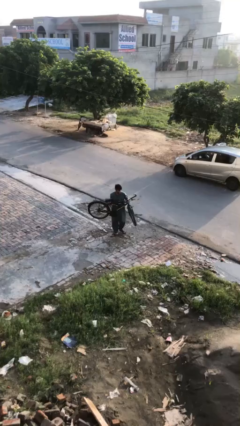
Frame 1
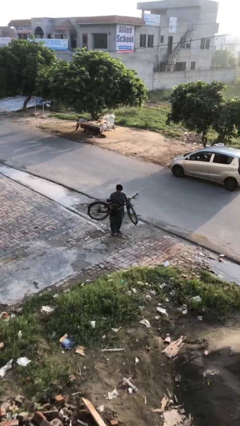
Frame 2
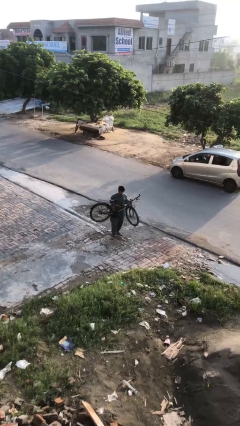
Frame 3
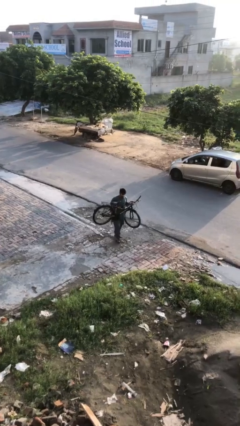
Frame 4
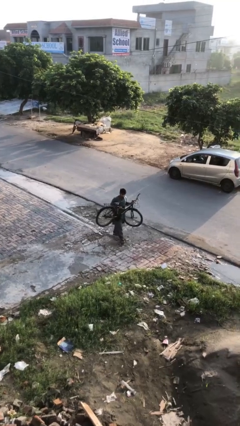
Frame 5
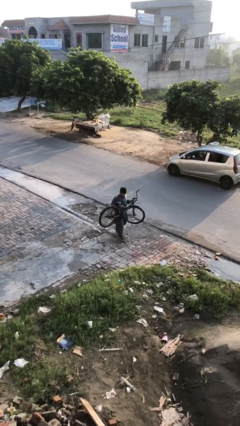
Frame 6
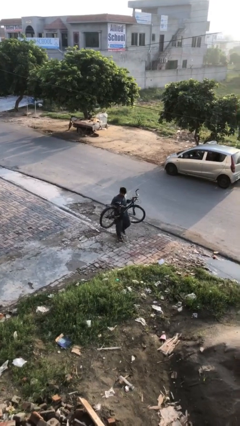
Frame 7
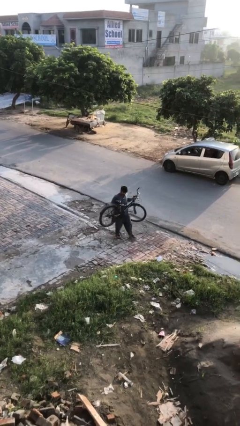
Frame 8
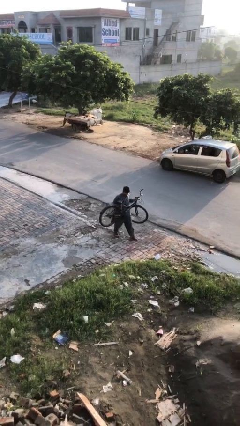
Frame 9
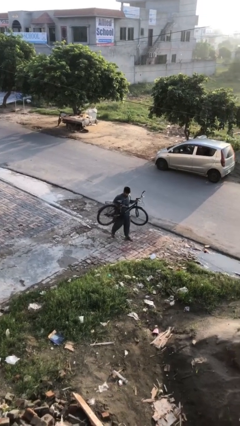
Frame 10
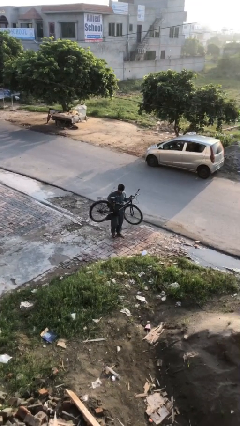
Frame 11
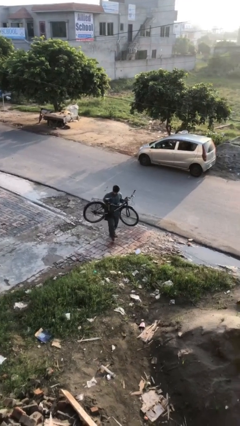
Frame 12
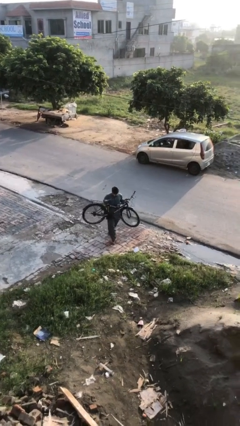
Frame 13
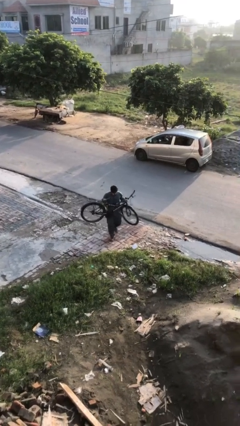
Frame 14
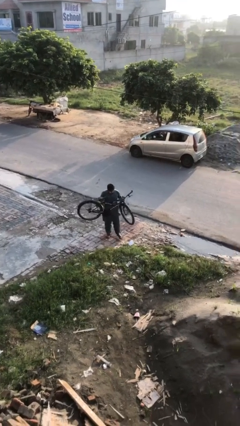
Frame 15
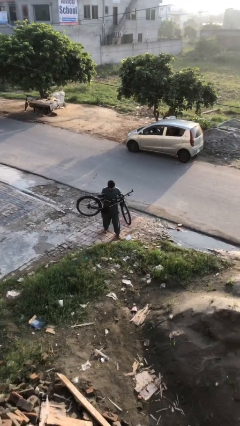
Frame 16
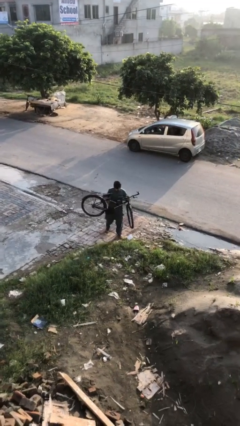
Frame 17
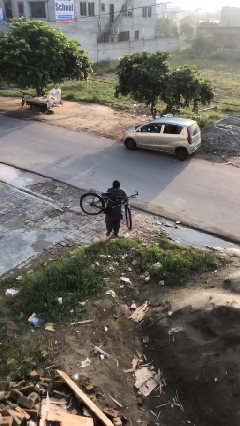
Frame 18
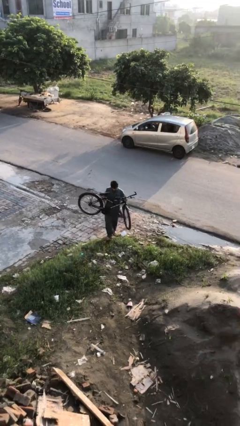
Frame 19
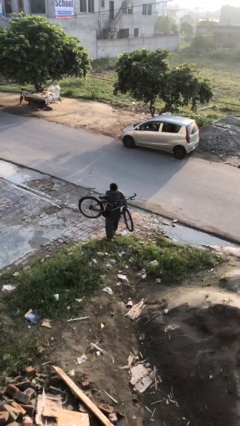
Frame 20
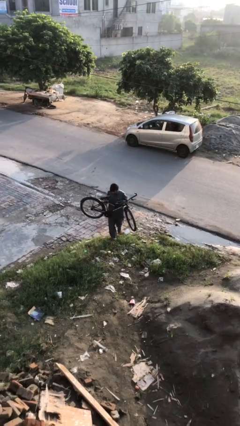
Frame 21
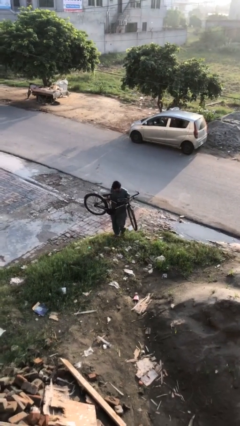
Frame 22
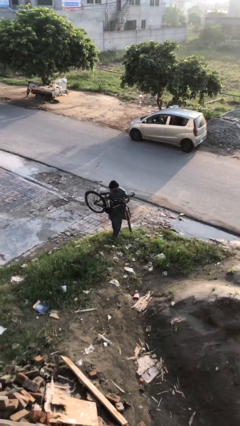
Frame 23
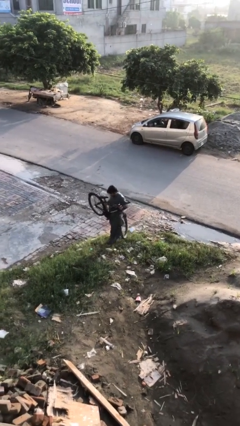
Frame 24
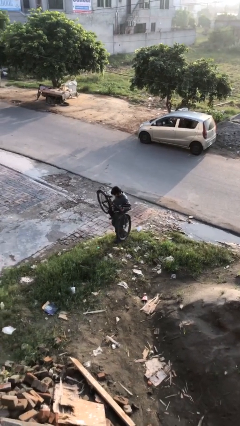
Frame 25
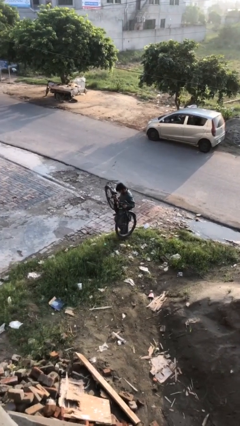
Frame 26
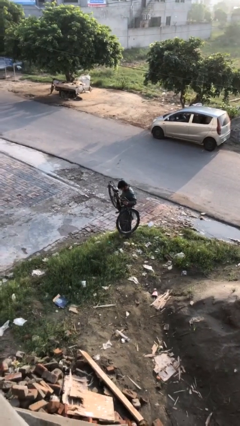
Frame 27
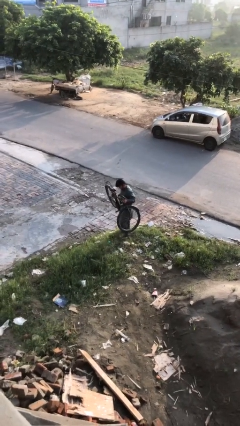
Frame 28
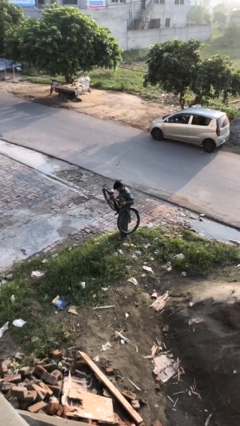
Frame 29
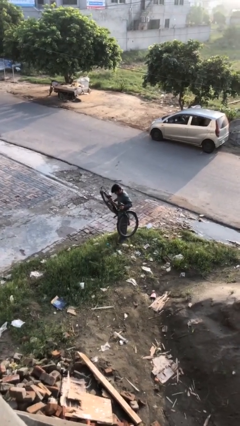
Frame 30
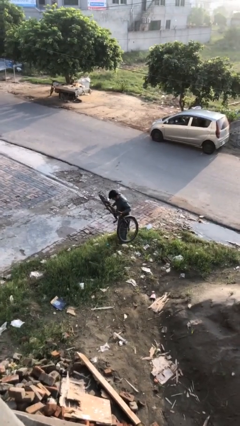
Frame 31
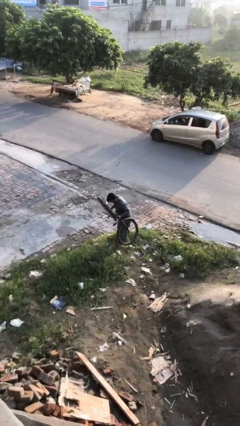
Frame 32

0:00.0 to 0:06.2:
person carries heavy object

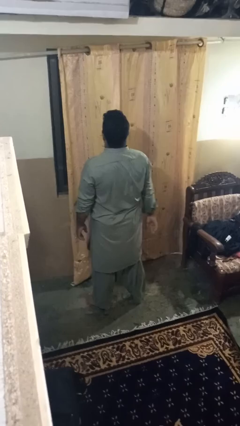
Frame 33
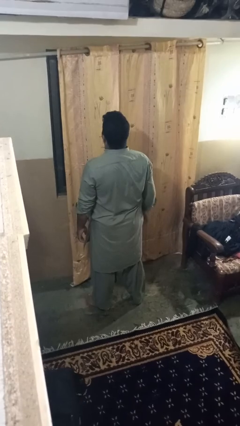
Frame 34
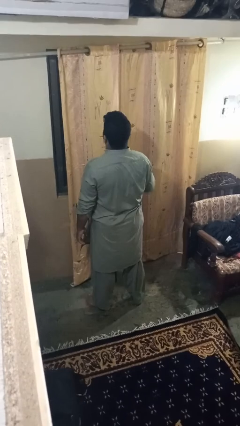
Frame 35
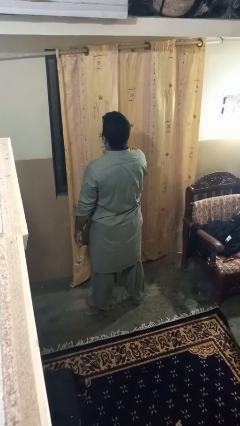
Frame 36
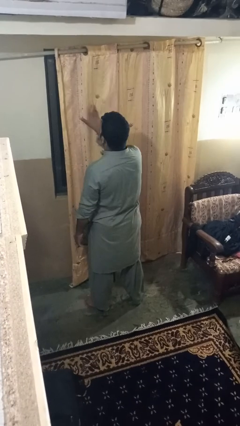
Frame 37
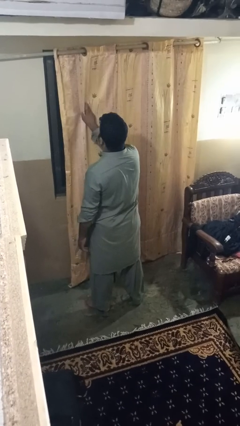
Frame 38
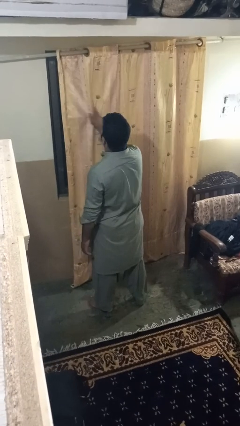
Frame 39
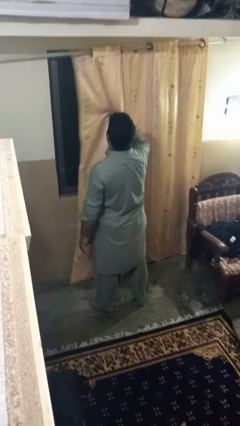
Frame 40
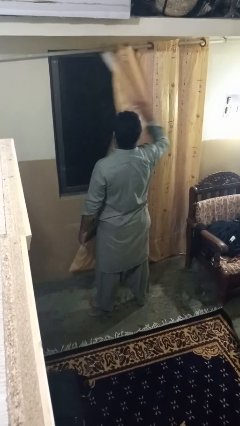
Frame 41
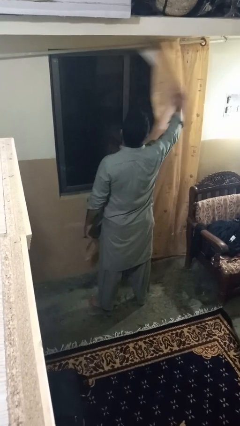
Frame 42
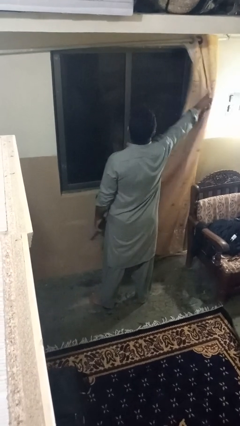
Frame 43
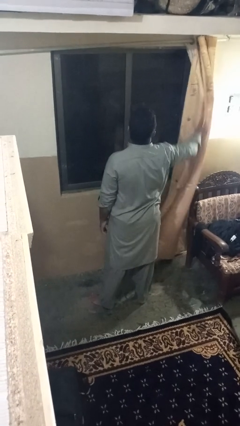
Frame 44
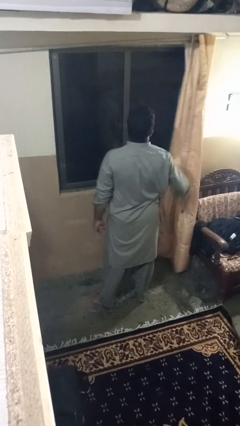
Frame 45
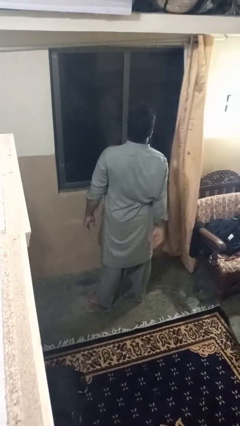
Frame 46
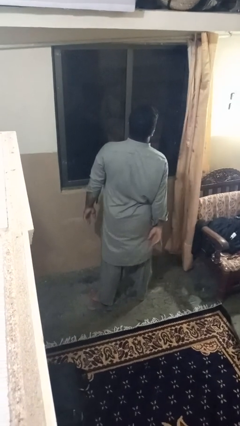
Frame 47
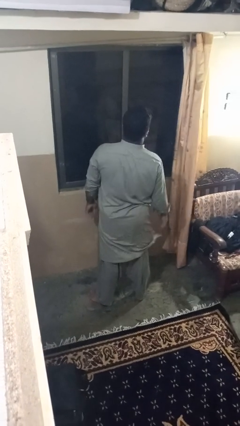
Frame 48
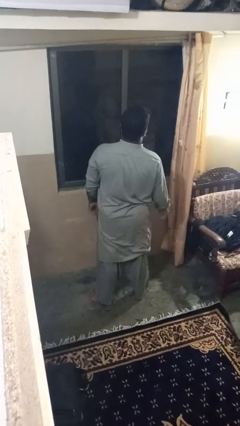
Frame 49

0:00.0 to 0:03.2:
person opens curtains

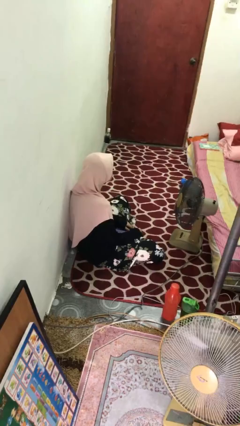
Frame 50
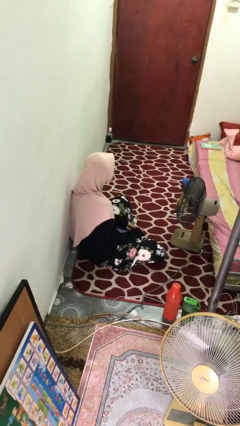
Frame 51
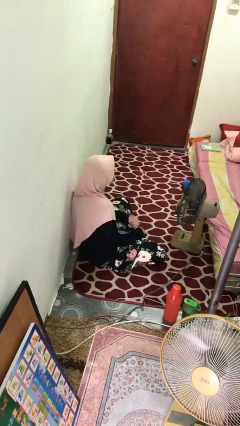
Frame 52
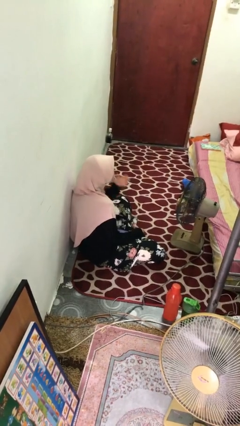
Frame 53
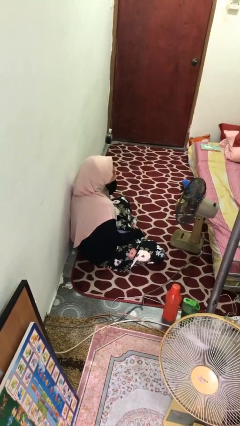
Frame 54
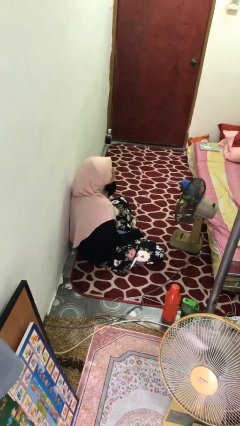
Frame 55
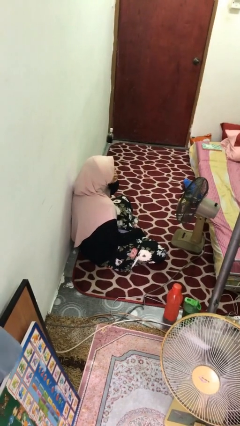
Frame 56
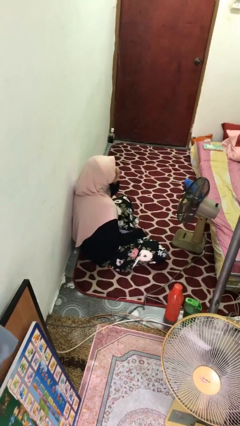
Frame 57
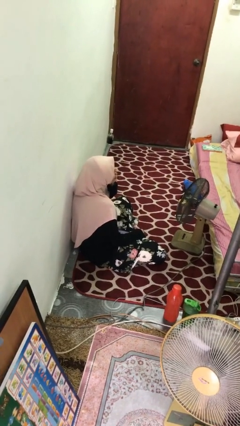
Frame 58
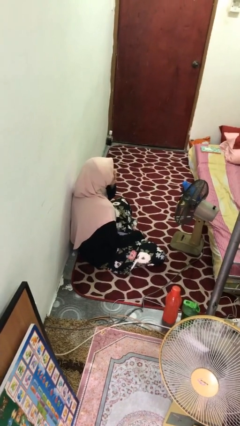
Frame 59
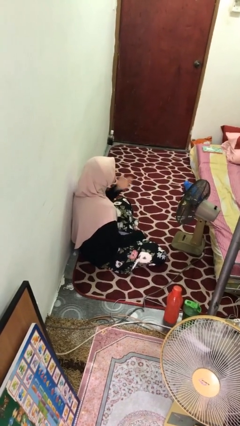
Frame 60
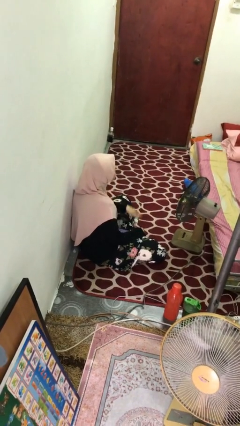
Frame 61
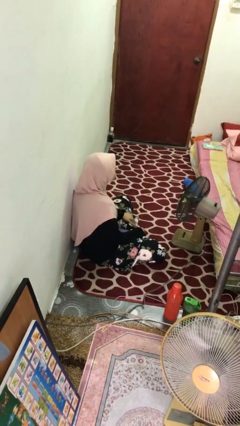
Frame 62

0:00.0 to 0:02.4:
person yawns

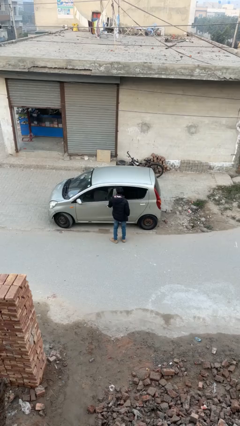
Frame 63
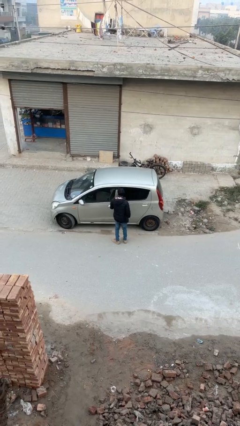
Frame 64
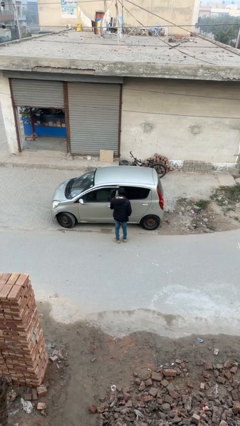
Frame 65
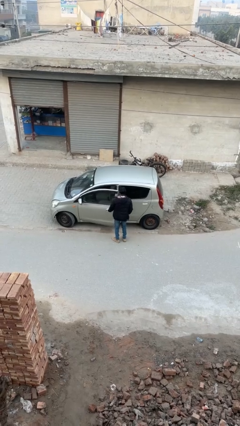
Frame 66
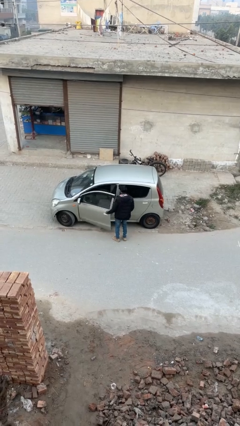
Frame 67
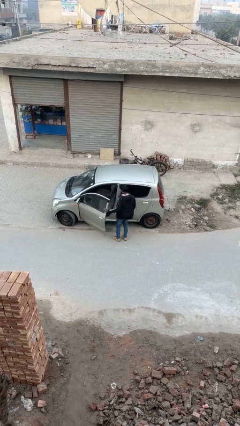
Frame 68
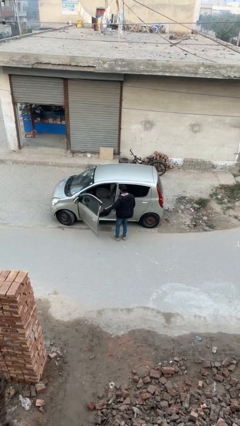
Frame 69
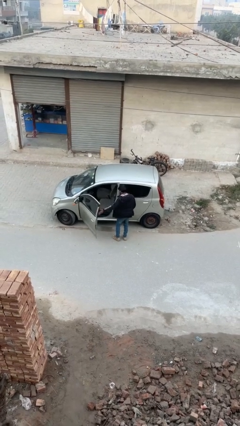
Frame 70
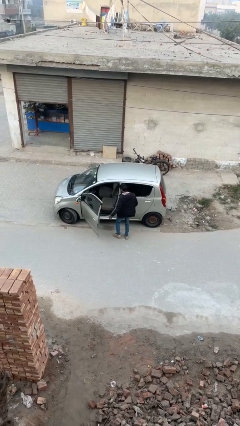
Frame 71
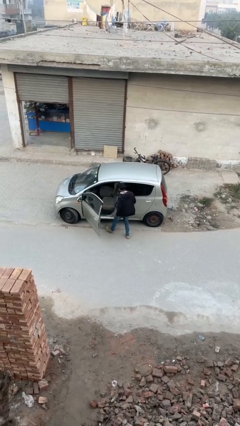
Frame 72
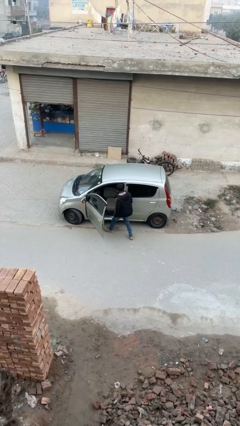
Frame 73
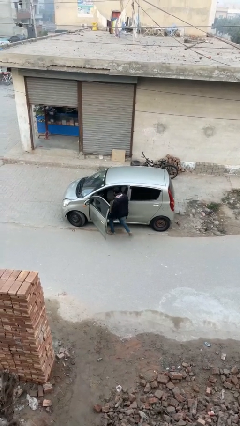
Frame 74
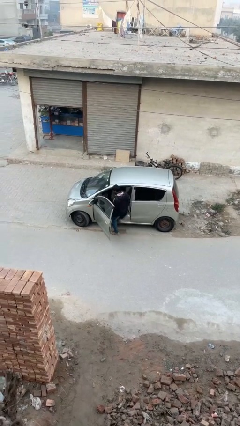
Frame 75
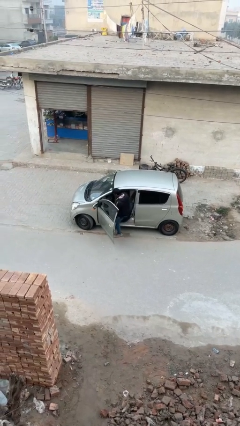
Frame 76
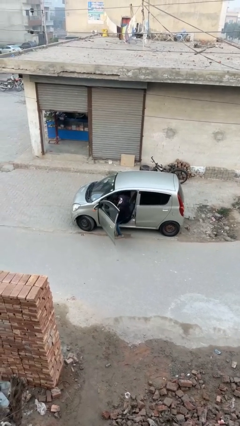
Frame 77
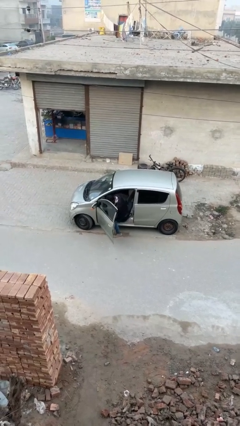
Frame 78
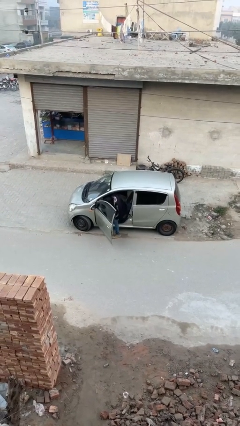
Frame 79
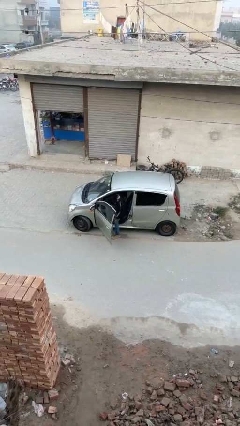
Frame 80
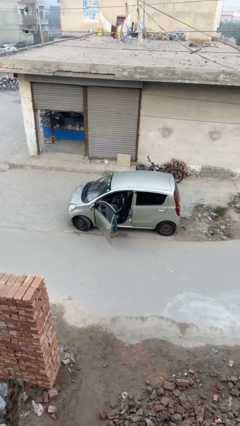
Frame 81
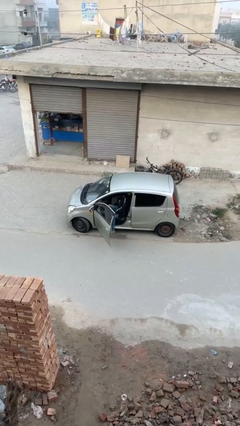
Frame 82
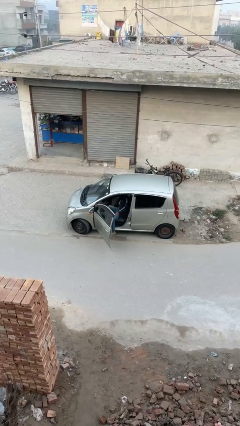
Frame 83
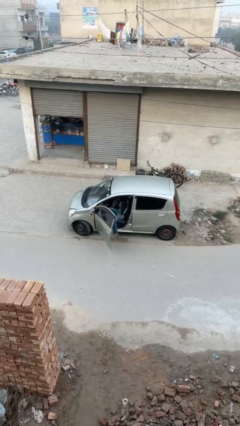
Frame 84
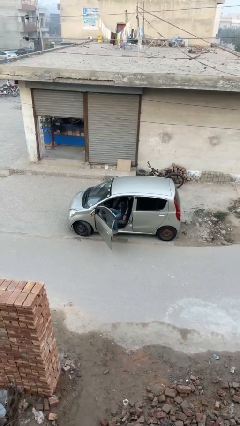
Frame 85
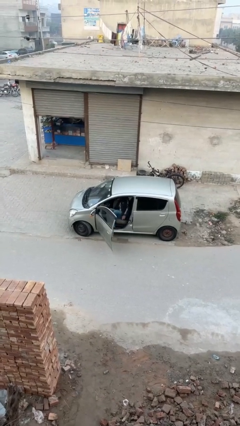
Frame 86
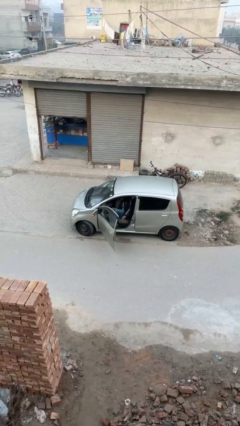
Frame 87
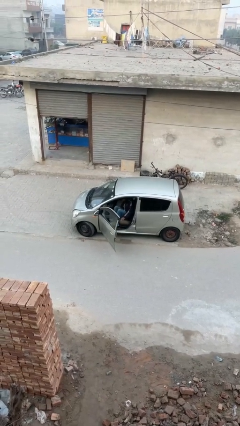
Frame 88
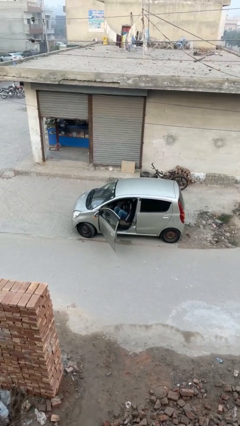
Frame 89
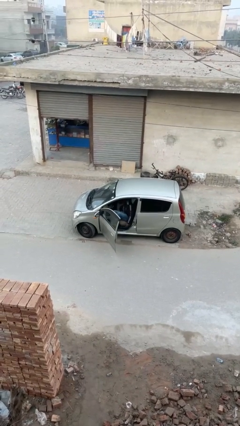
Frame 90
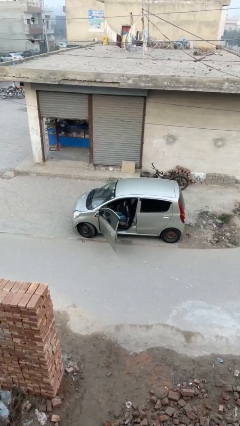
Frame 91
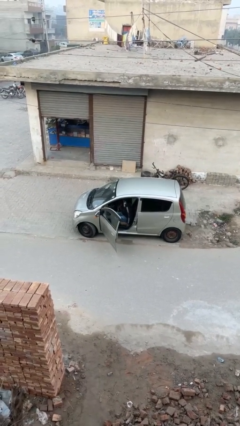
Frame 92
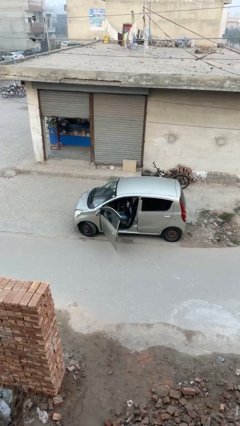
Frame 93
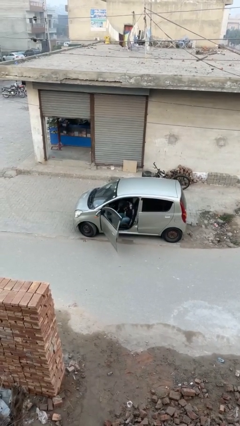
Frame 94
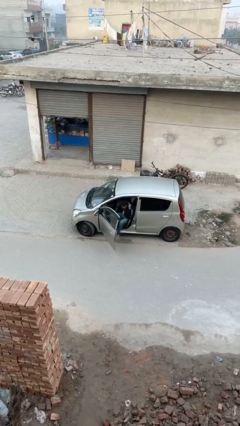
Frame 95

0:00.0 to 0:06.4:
person enters car
